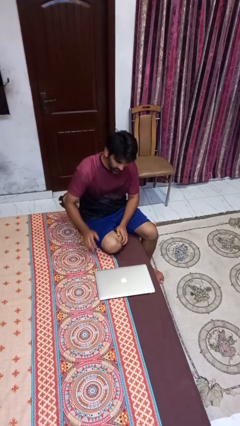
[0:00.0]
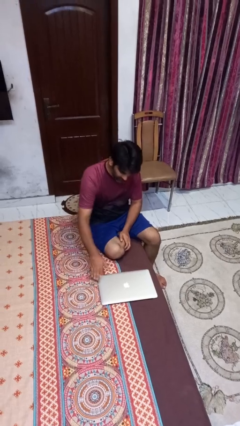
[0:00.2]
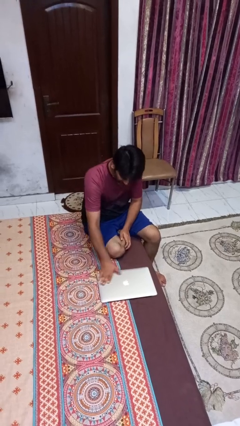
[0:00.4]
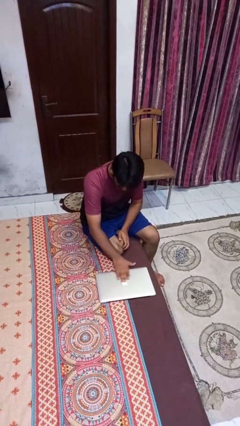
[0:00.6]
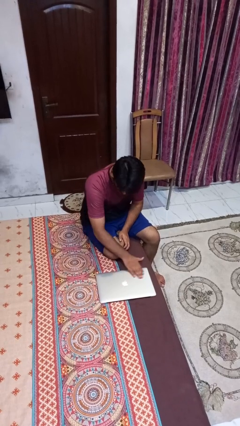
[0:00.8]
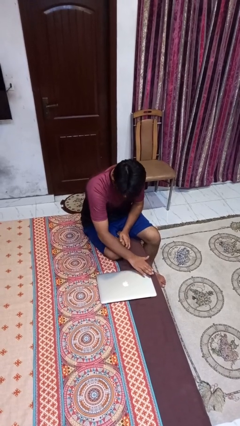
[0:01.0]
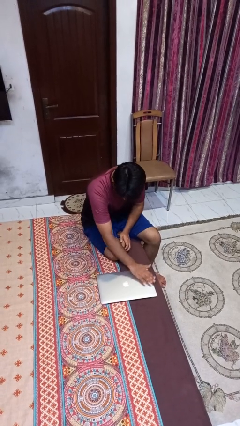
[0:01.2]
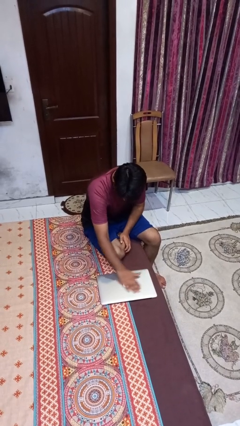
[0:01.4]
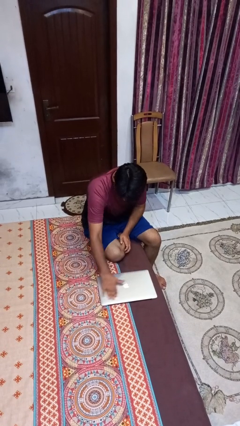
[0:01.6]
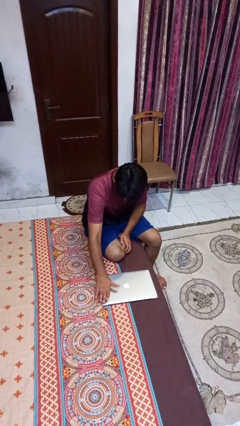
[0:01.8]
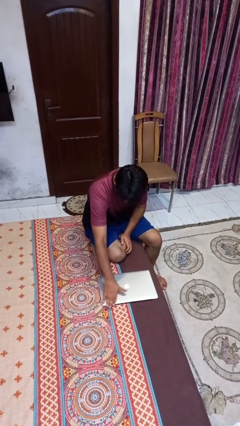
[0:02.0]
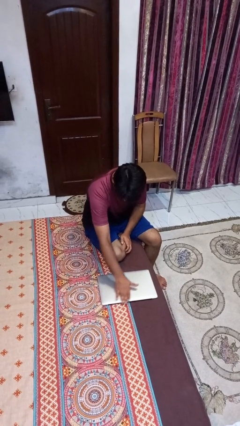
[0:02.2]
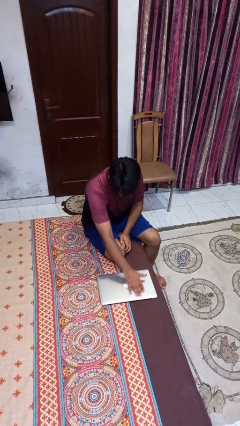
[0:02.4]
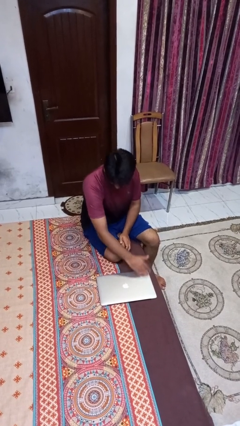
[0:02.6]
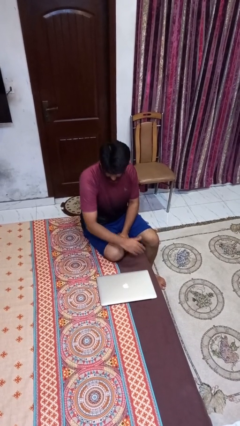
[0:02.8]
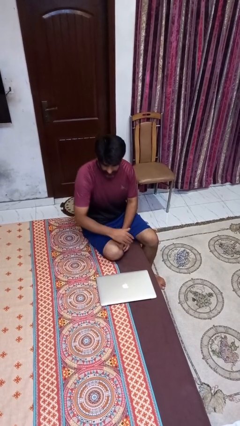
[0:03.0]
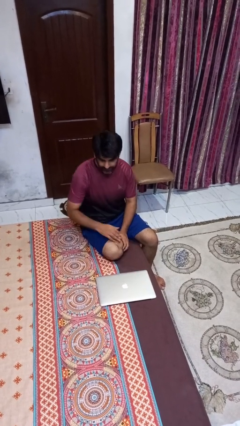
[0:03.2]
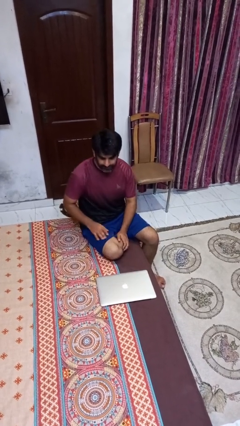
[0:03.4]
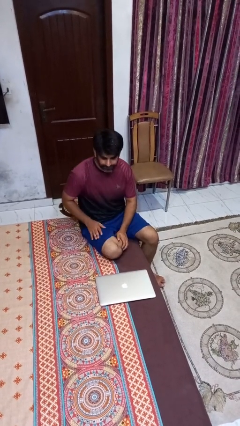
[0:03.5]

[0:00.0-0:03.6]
person waves hand over object

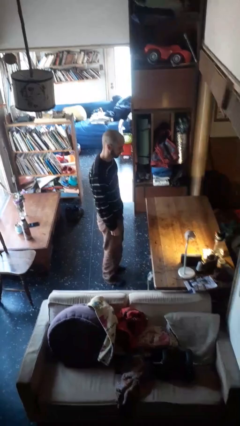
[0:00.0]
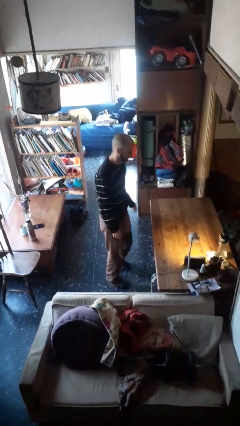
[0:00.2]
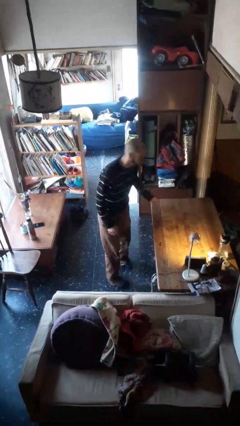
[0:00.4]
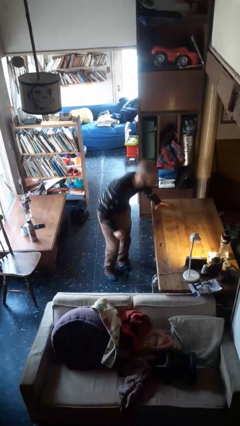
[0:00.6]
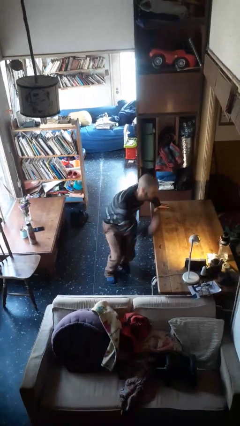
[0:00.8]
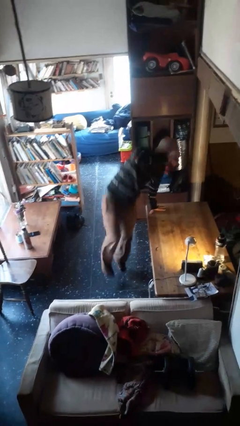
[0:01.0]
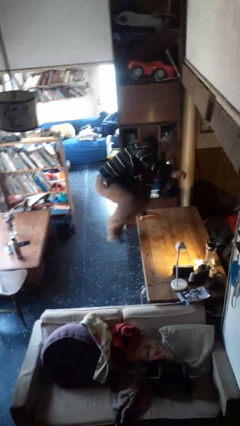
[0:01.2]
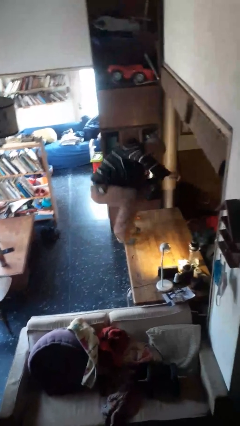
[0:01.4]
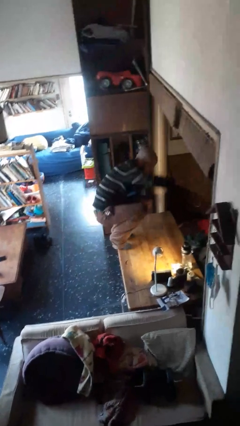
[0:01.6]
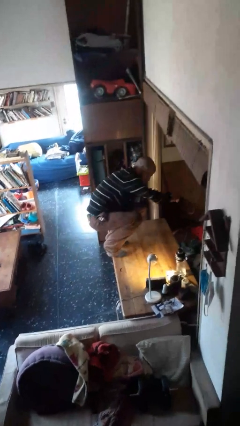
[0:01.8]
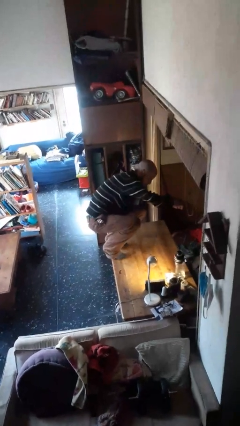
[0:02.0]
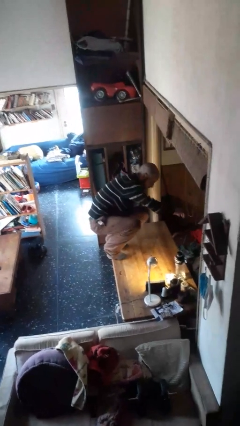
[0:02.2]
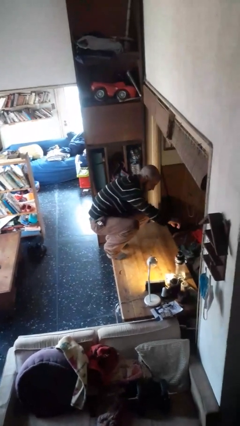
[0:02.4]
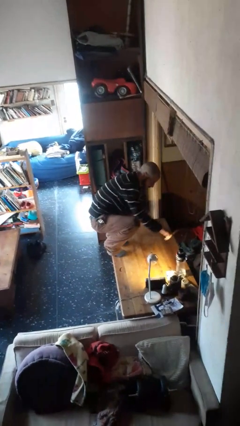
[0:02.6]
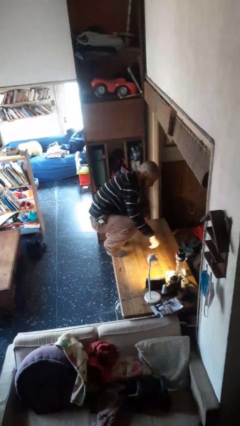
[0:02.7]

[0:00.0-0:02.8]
person climbs on table

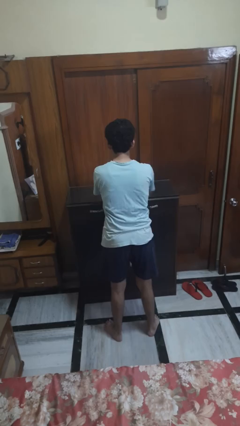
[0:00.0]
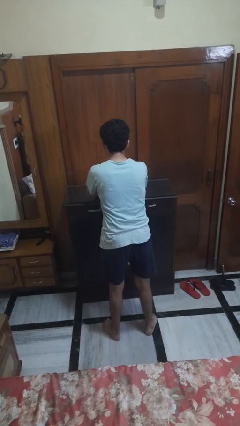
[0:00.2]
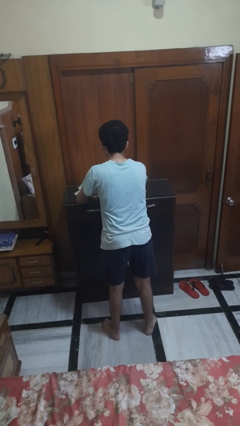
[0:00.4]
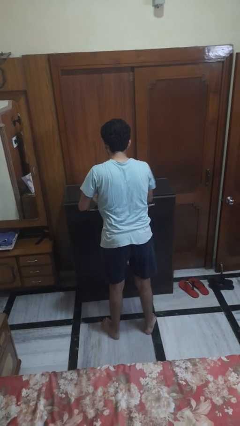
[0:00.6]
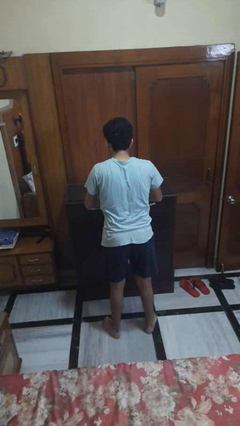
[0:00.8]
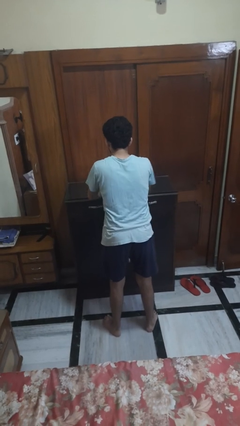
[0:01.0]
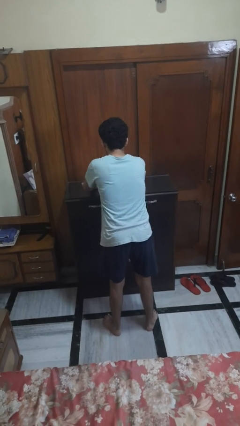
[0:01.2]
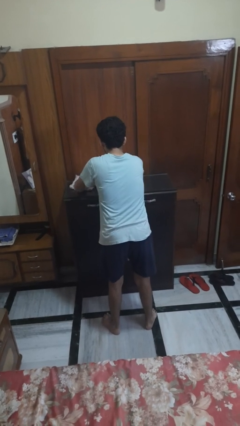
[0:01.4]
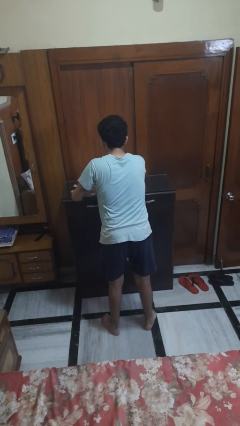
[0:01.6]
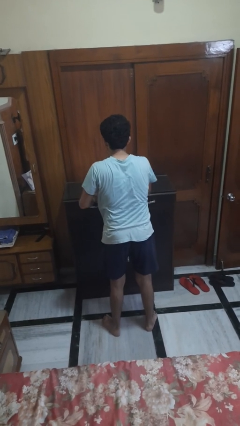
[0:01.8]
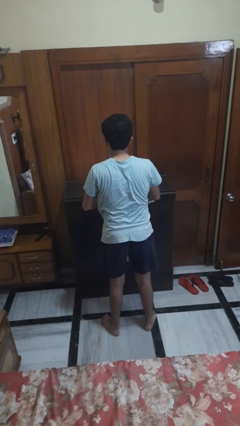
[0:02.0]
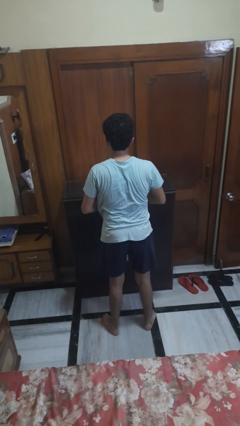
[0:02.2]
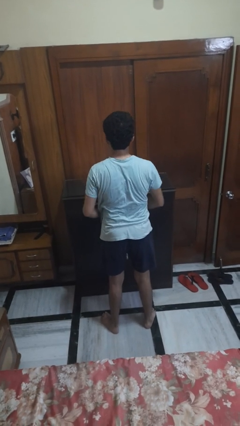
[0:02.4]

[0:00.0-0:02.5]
person cleans table with rag

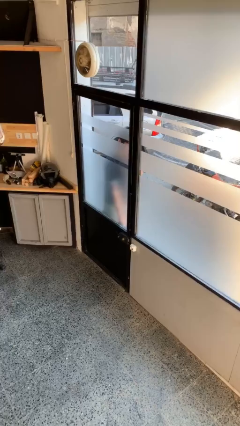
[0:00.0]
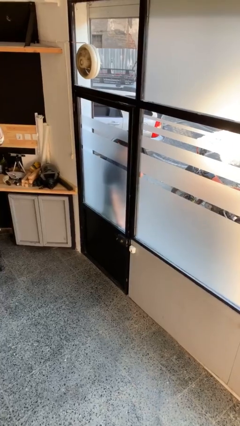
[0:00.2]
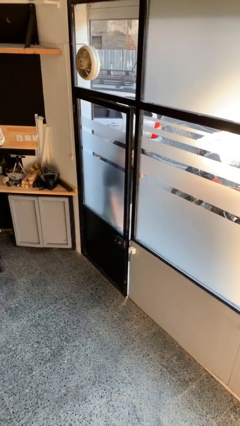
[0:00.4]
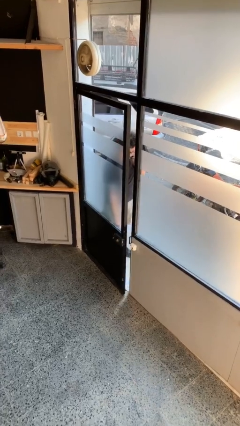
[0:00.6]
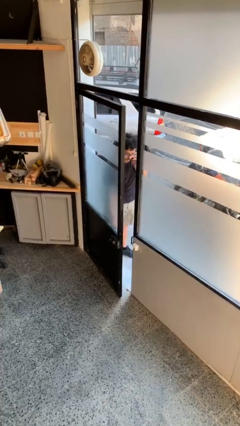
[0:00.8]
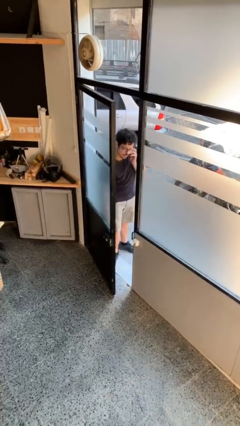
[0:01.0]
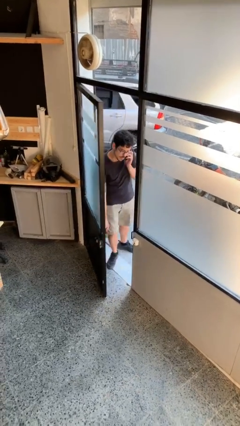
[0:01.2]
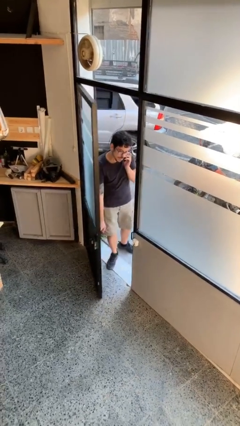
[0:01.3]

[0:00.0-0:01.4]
person opens facility door

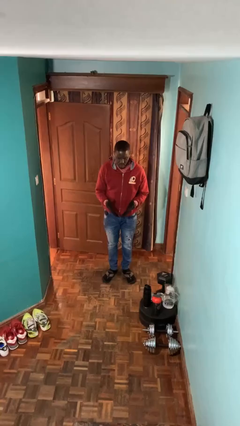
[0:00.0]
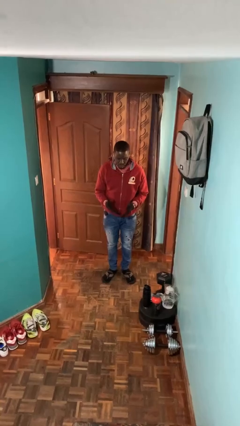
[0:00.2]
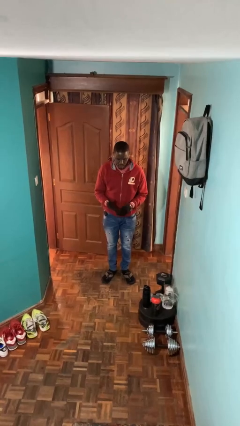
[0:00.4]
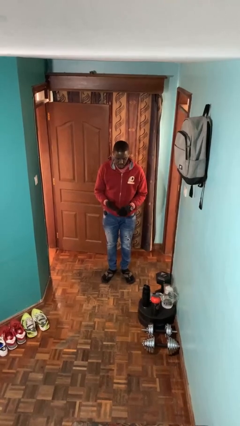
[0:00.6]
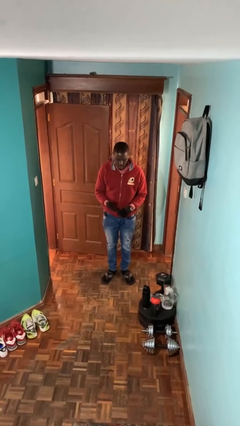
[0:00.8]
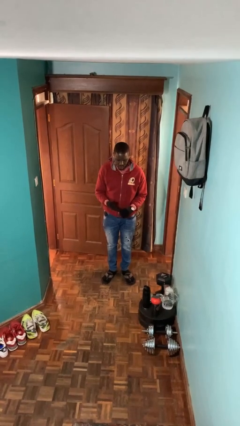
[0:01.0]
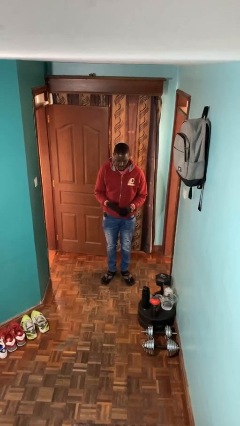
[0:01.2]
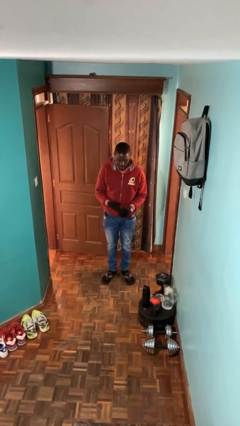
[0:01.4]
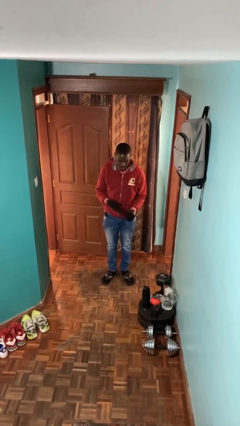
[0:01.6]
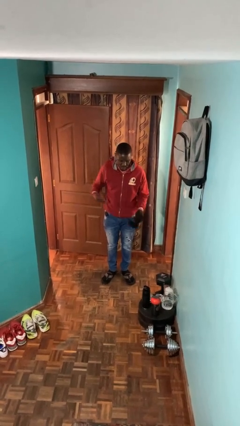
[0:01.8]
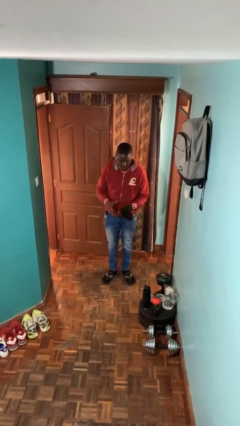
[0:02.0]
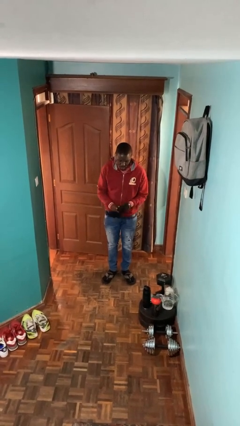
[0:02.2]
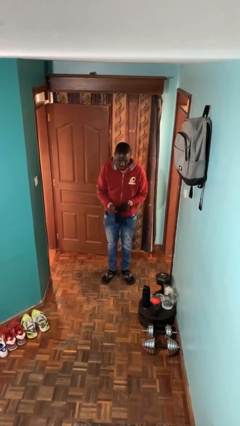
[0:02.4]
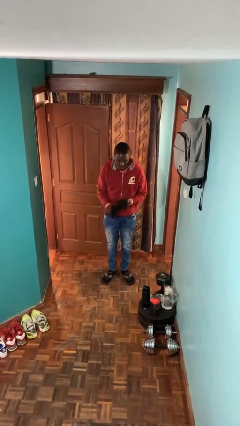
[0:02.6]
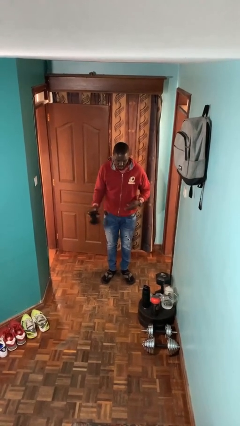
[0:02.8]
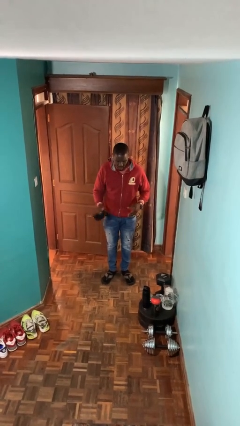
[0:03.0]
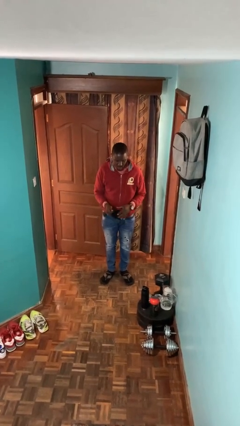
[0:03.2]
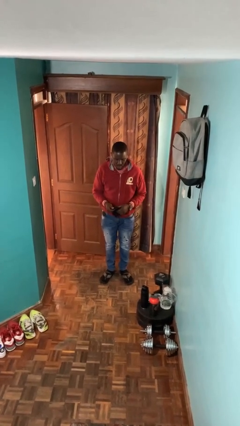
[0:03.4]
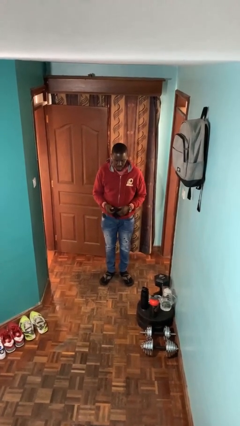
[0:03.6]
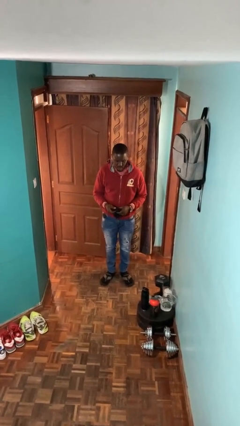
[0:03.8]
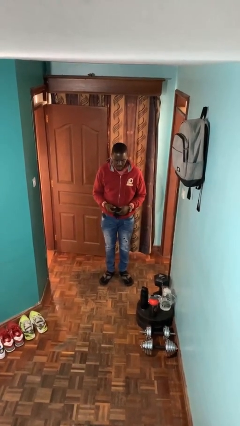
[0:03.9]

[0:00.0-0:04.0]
person takes off gloves

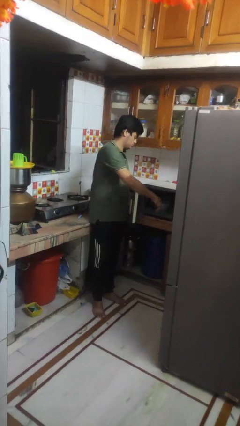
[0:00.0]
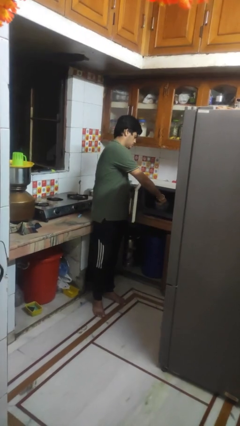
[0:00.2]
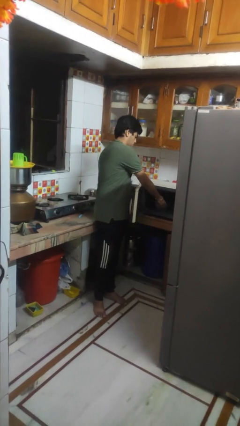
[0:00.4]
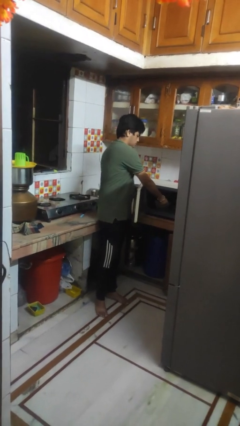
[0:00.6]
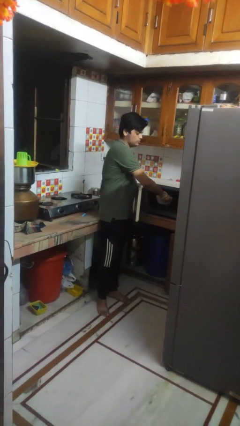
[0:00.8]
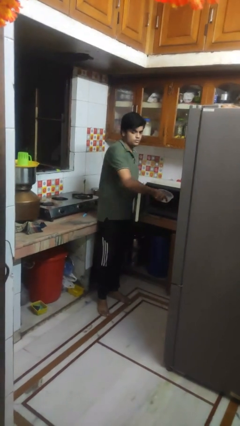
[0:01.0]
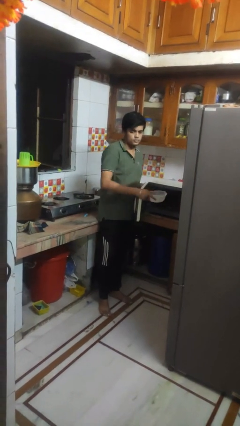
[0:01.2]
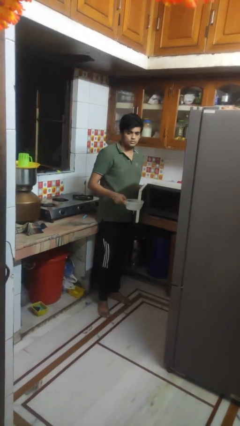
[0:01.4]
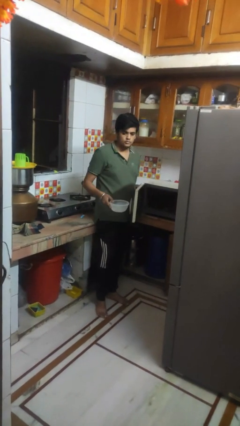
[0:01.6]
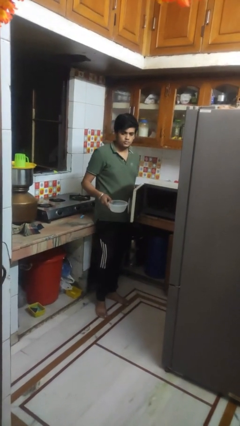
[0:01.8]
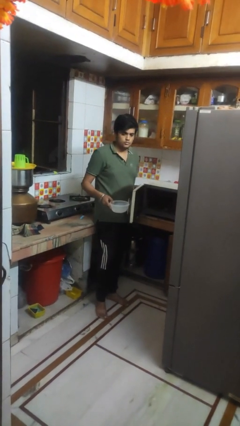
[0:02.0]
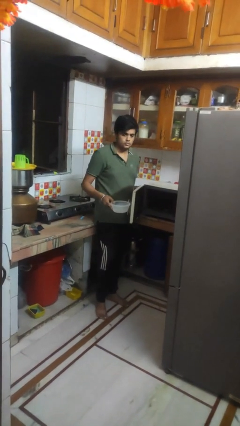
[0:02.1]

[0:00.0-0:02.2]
person takes object from microwave

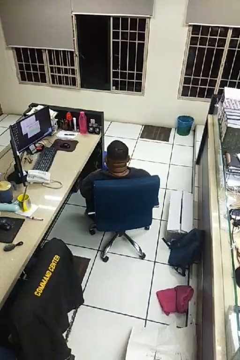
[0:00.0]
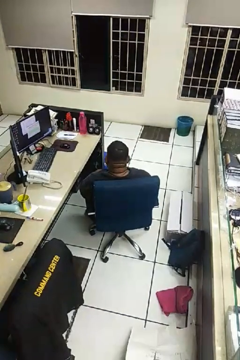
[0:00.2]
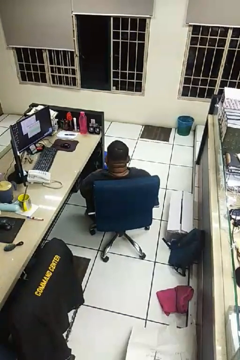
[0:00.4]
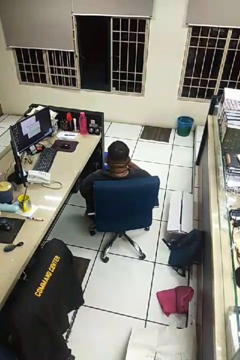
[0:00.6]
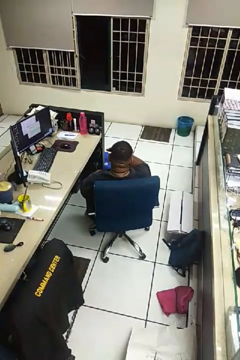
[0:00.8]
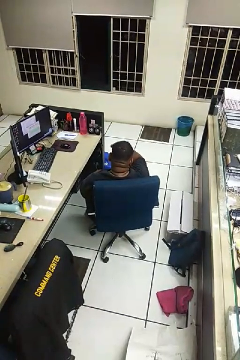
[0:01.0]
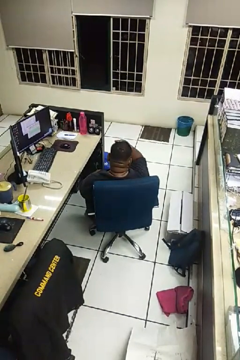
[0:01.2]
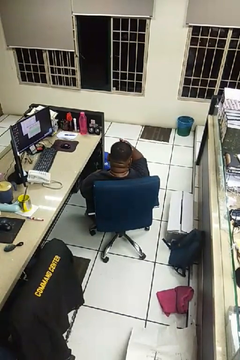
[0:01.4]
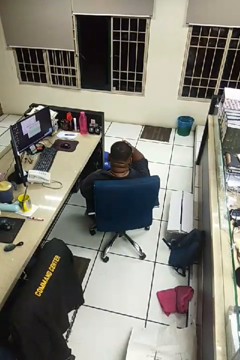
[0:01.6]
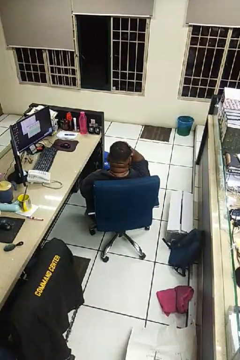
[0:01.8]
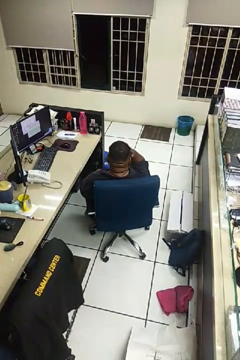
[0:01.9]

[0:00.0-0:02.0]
person strokes hair
